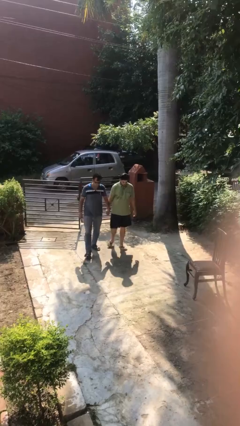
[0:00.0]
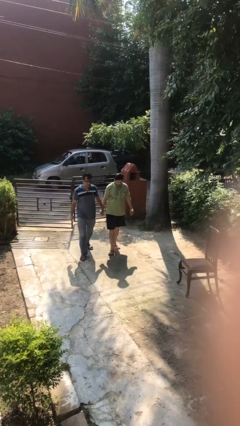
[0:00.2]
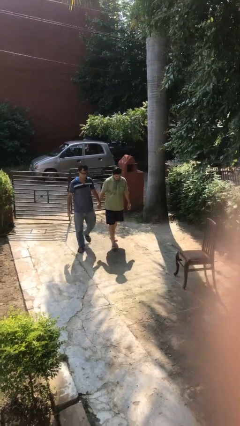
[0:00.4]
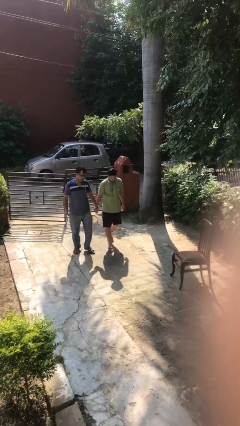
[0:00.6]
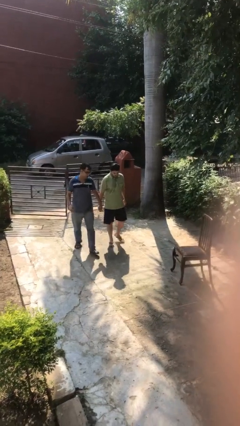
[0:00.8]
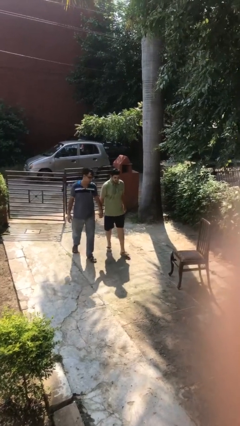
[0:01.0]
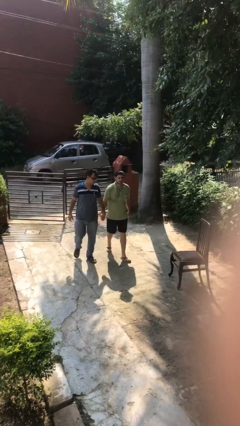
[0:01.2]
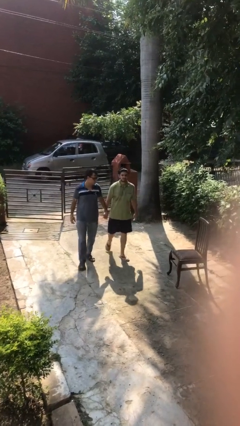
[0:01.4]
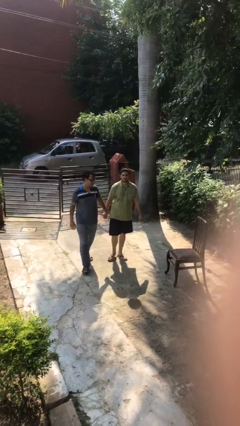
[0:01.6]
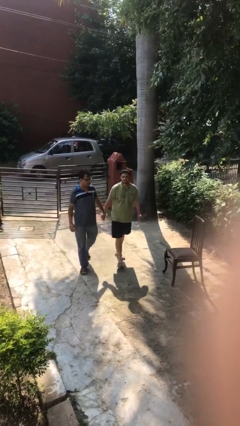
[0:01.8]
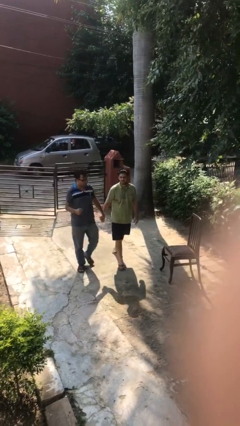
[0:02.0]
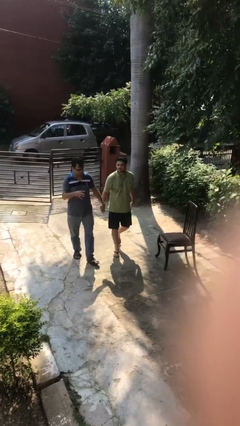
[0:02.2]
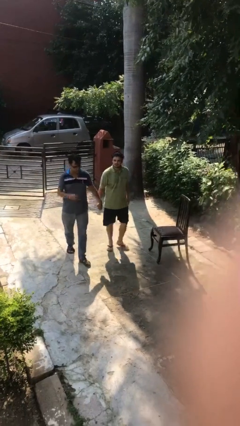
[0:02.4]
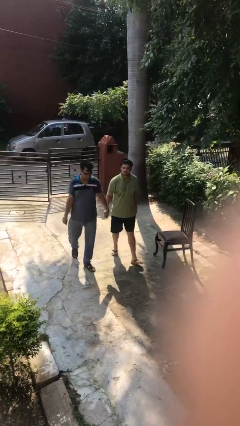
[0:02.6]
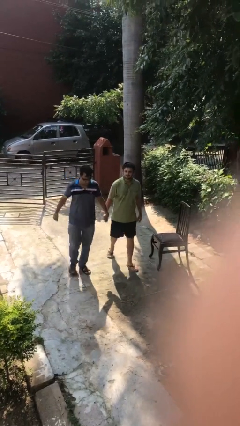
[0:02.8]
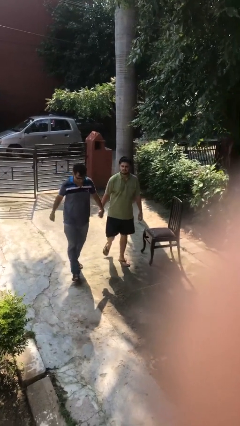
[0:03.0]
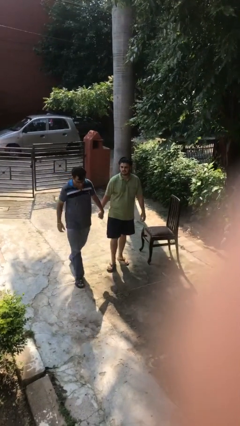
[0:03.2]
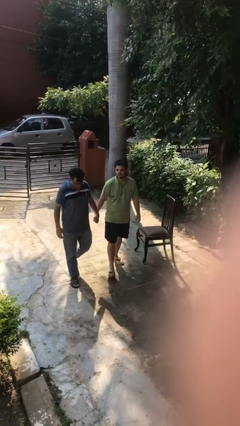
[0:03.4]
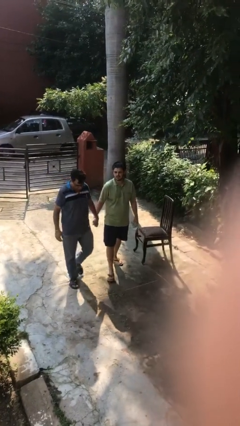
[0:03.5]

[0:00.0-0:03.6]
person holds hand

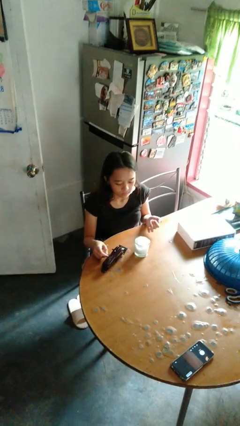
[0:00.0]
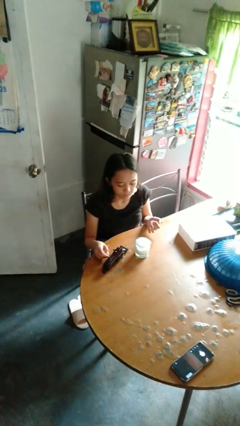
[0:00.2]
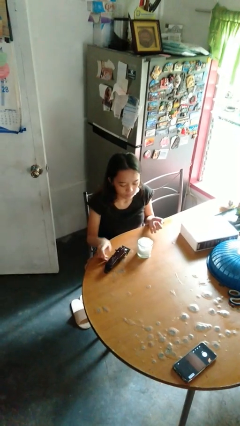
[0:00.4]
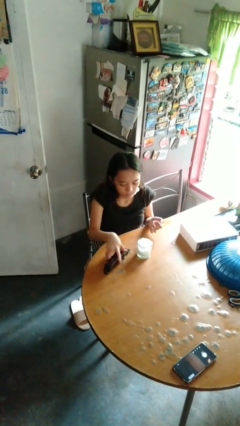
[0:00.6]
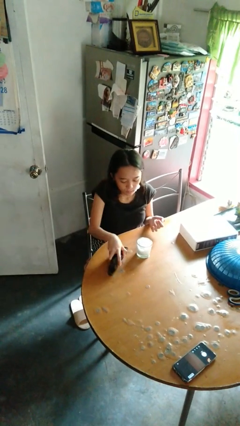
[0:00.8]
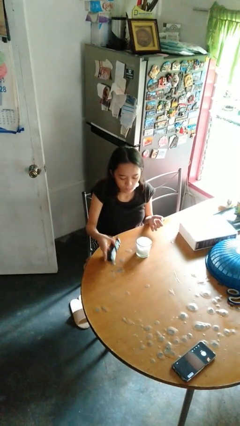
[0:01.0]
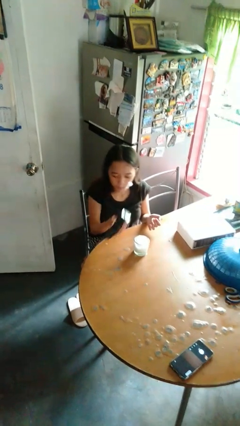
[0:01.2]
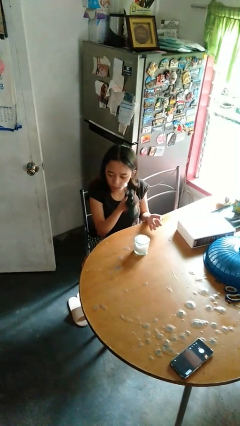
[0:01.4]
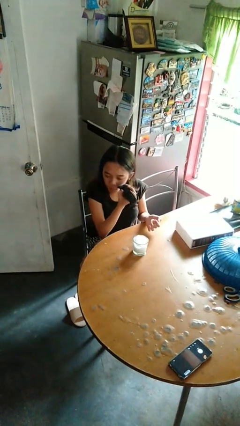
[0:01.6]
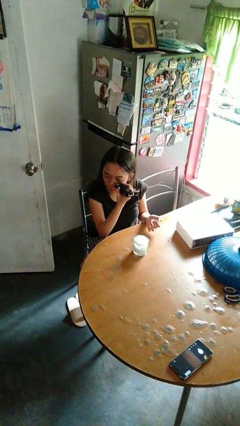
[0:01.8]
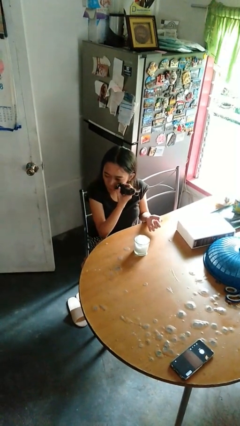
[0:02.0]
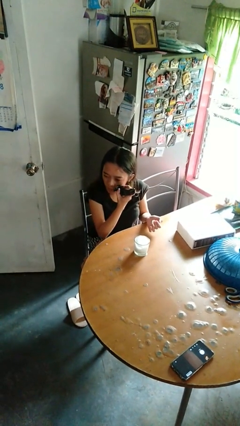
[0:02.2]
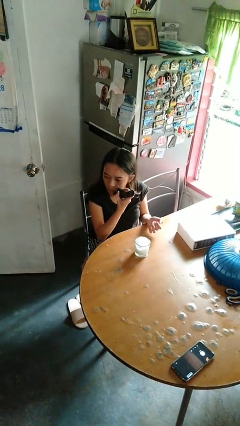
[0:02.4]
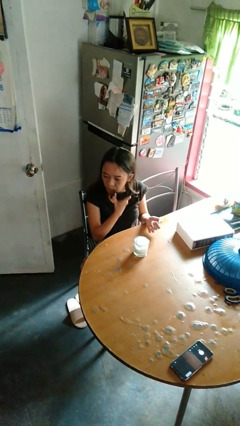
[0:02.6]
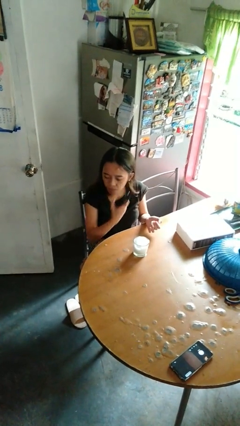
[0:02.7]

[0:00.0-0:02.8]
person shaves face

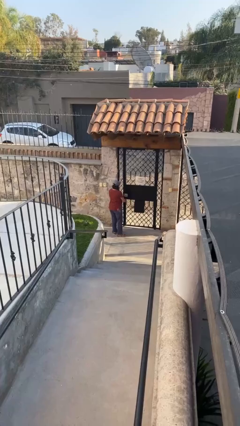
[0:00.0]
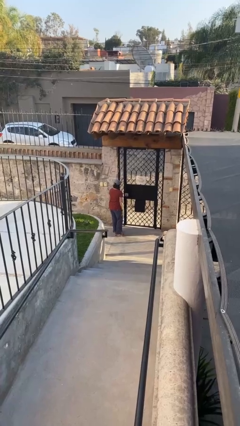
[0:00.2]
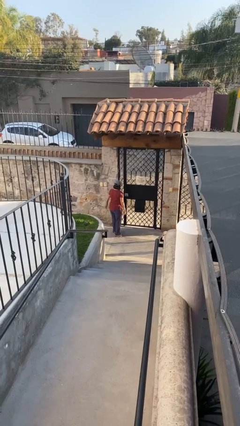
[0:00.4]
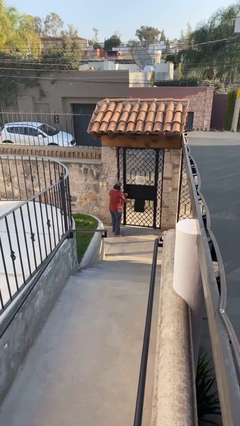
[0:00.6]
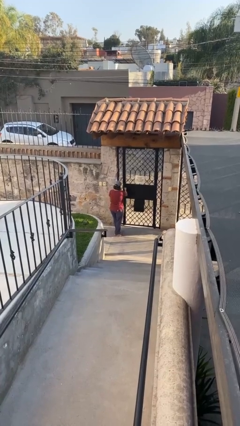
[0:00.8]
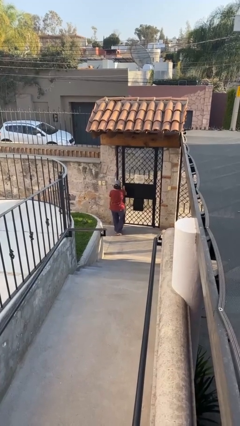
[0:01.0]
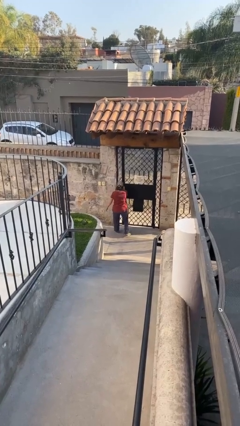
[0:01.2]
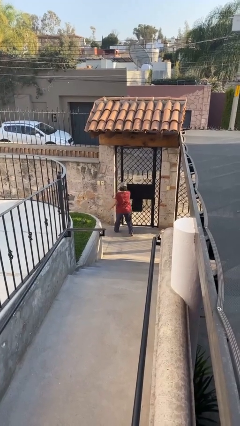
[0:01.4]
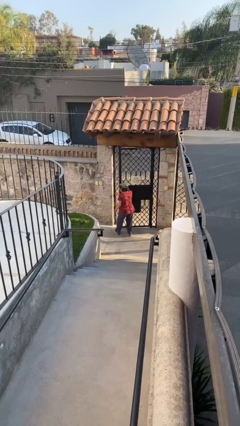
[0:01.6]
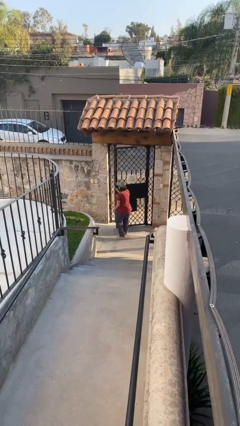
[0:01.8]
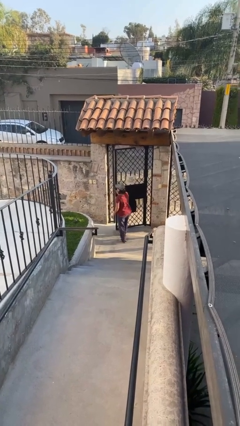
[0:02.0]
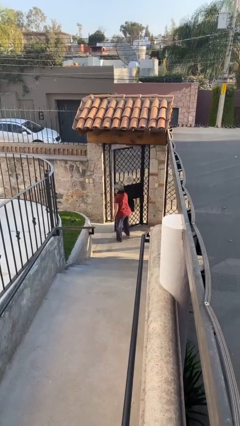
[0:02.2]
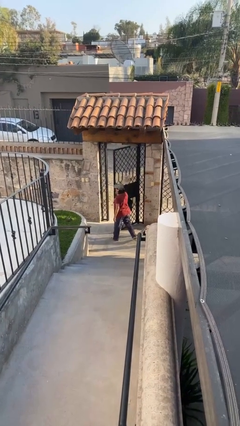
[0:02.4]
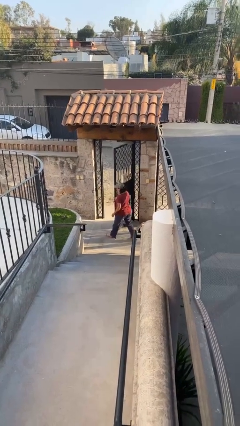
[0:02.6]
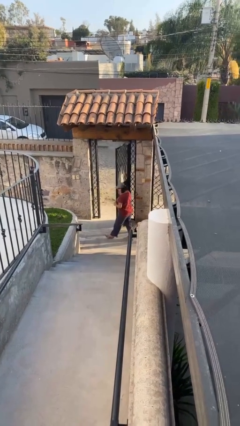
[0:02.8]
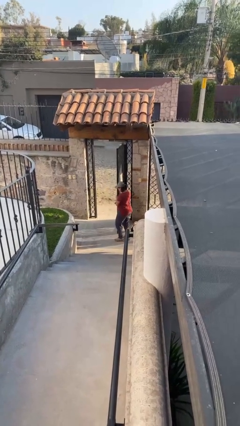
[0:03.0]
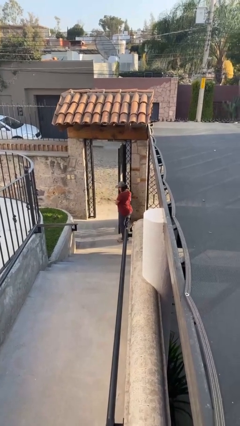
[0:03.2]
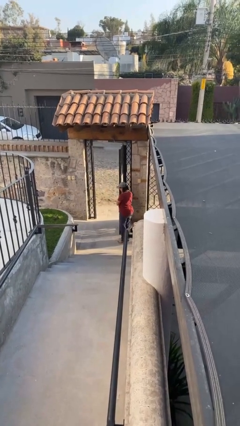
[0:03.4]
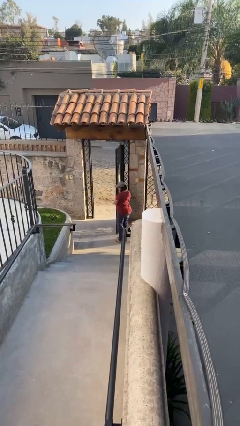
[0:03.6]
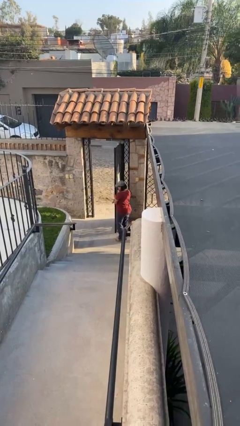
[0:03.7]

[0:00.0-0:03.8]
person opens facility door

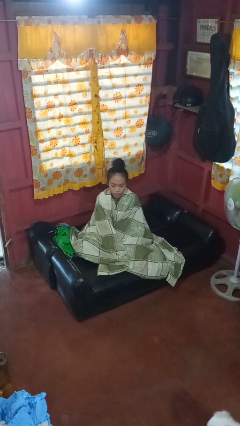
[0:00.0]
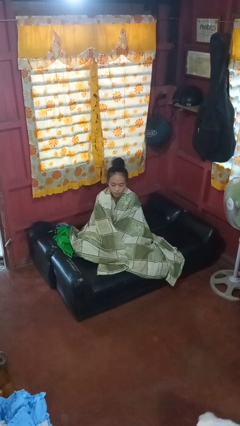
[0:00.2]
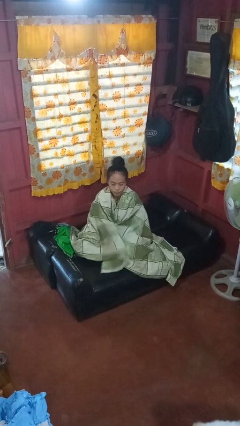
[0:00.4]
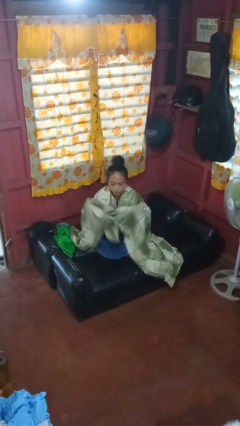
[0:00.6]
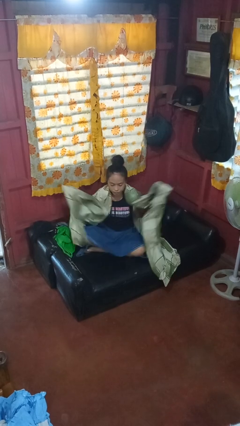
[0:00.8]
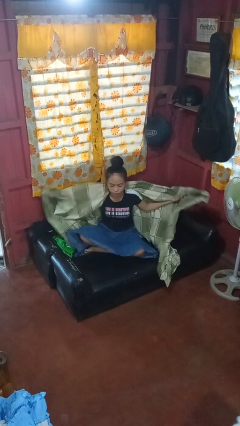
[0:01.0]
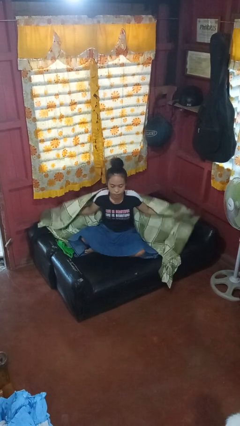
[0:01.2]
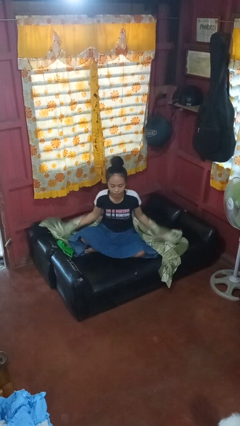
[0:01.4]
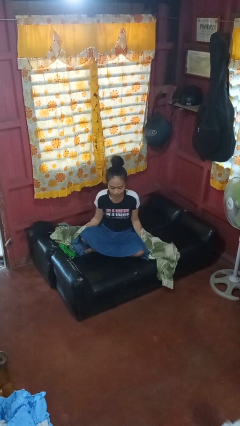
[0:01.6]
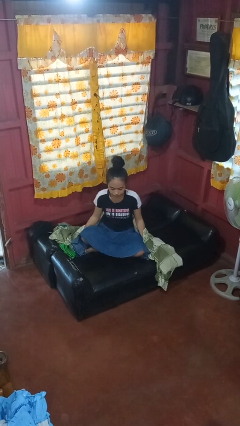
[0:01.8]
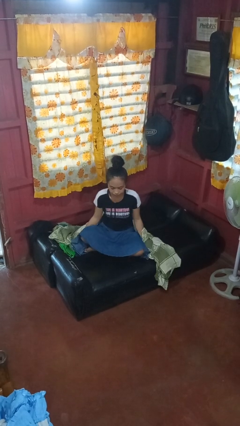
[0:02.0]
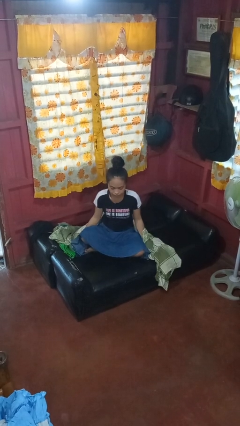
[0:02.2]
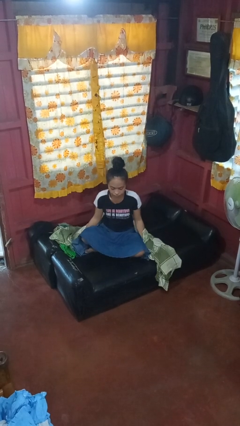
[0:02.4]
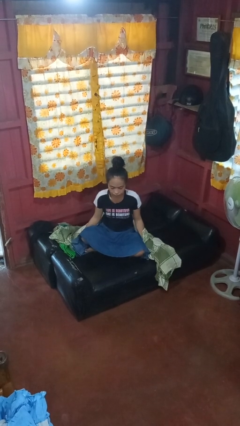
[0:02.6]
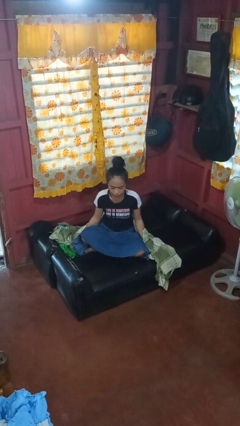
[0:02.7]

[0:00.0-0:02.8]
person uncovers with blanket

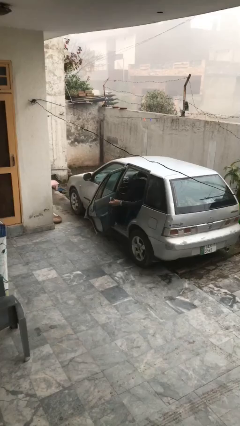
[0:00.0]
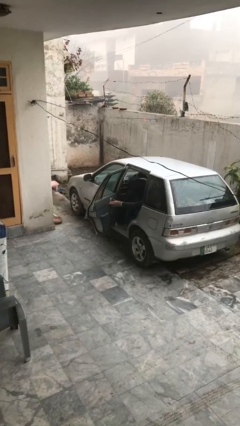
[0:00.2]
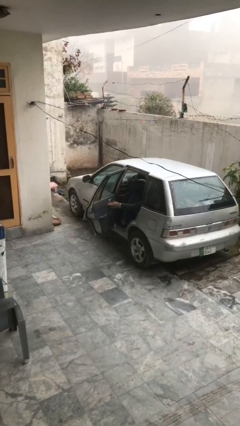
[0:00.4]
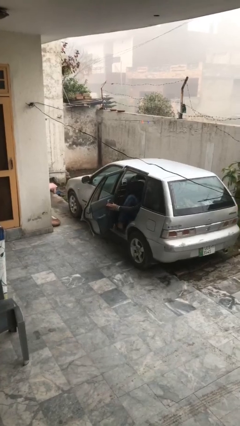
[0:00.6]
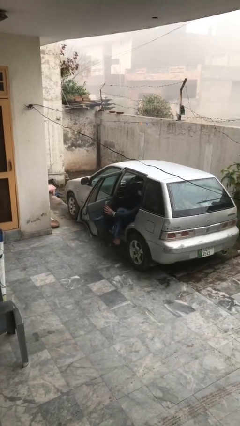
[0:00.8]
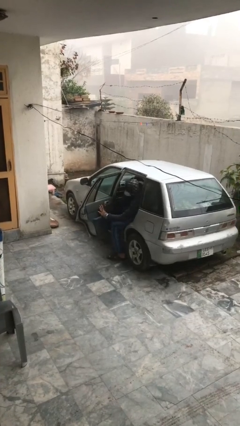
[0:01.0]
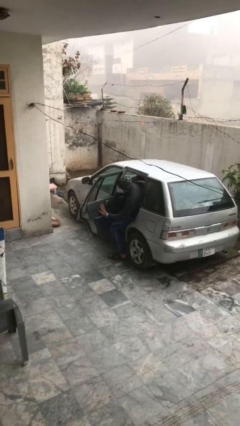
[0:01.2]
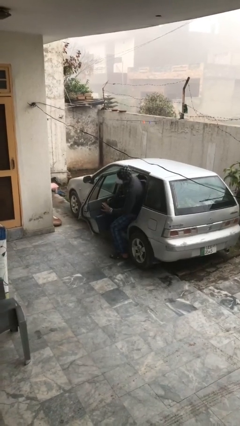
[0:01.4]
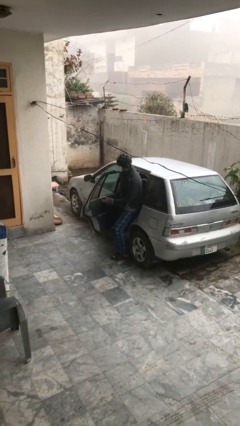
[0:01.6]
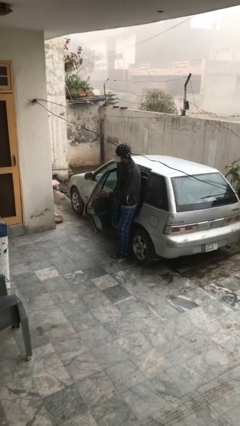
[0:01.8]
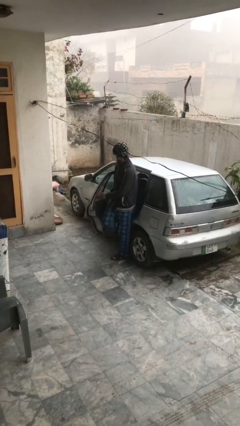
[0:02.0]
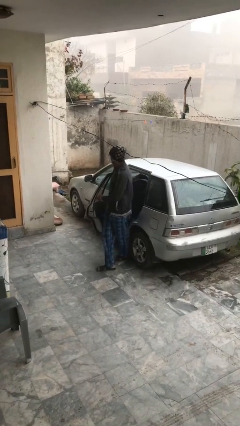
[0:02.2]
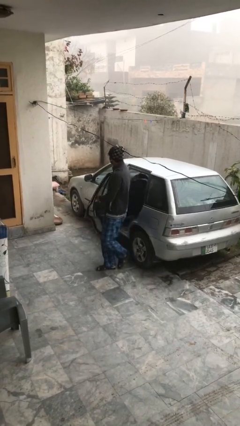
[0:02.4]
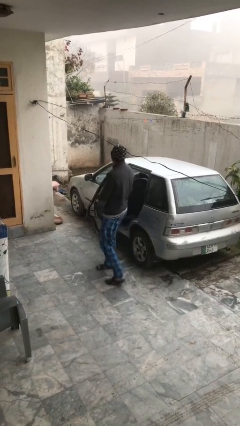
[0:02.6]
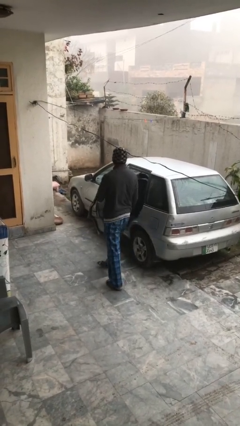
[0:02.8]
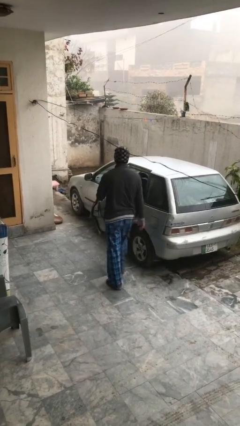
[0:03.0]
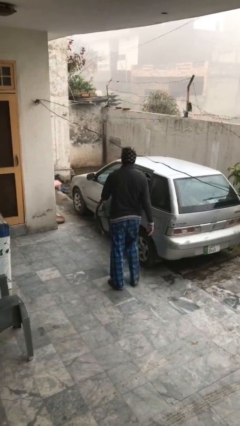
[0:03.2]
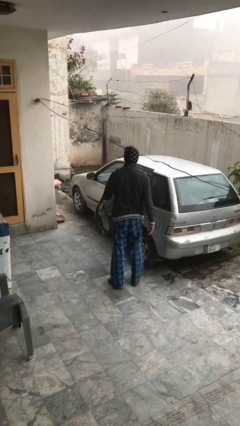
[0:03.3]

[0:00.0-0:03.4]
person exits car

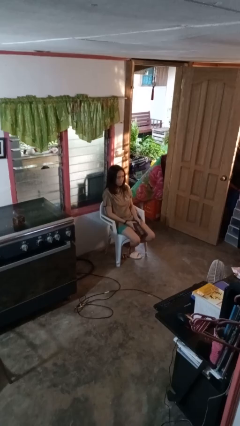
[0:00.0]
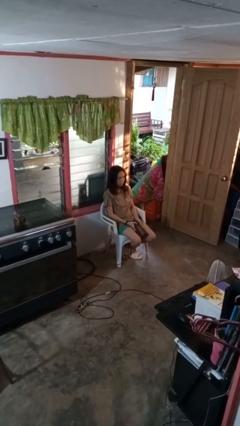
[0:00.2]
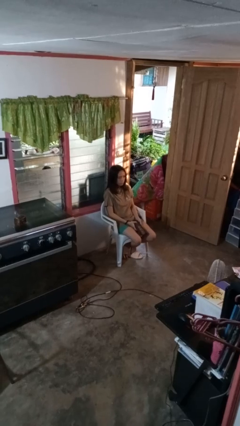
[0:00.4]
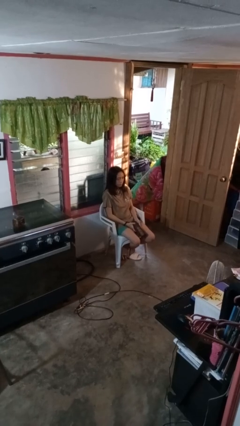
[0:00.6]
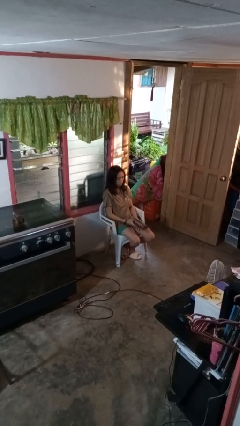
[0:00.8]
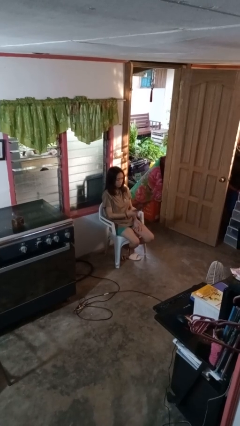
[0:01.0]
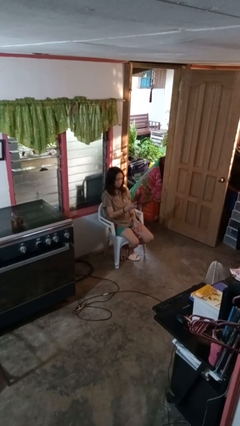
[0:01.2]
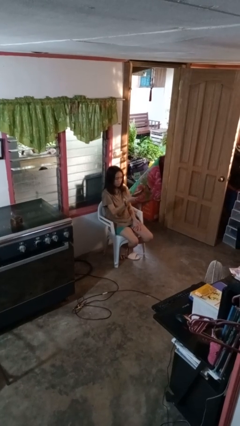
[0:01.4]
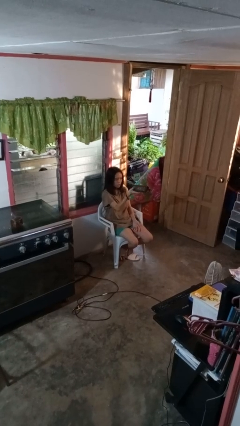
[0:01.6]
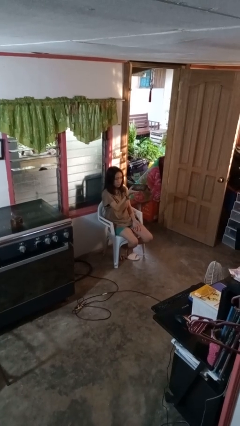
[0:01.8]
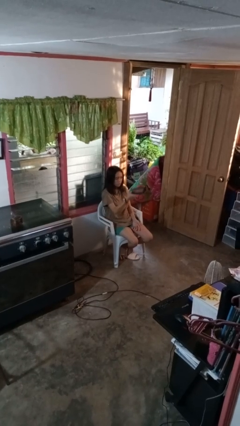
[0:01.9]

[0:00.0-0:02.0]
person uses television remote
